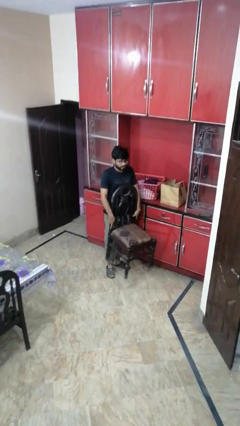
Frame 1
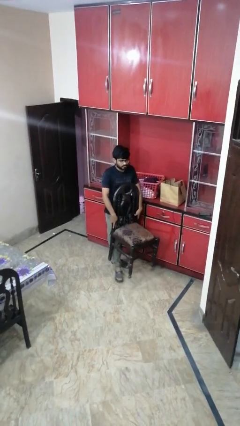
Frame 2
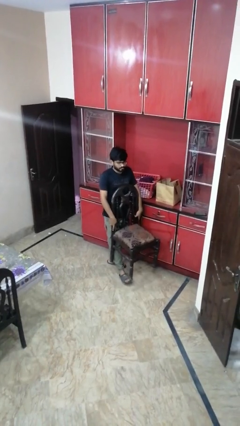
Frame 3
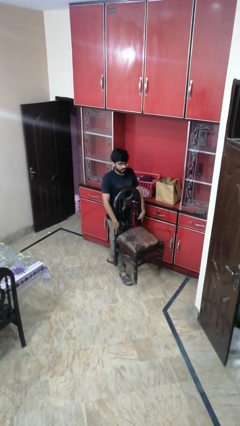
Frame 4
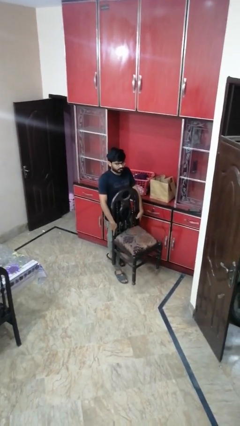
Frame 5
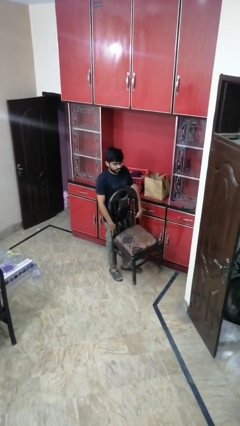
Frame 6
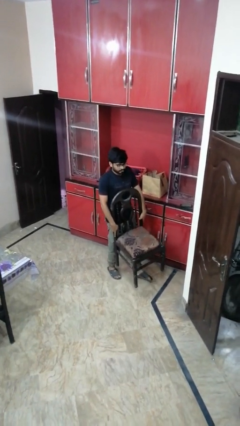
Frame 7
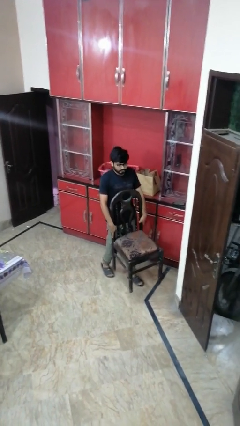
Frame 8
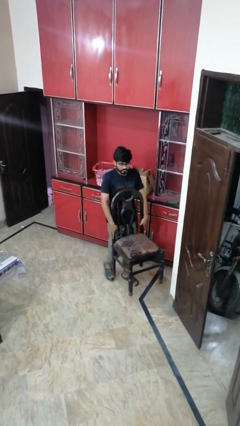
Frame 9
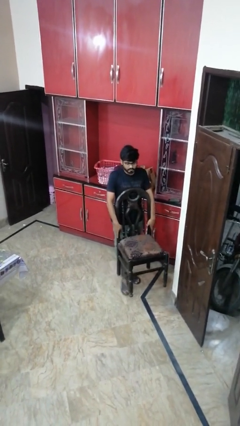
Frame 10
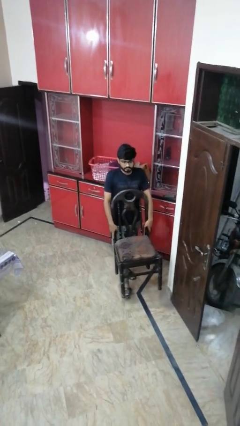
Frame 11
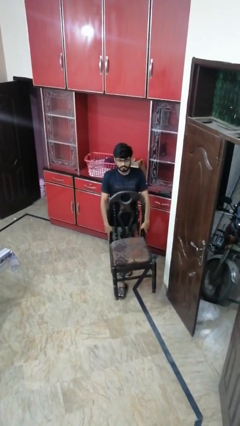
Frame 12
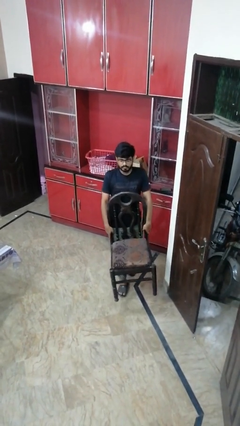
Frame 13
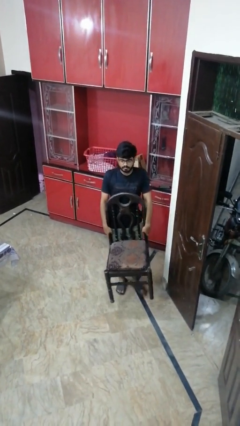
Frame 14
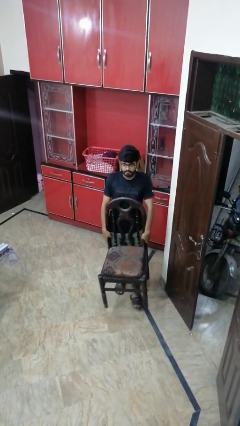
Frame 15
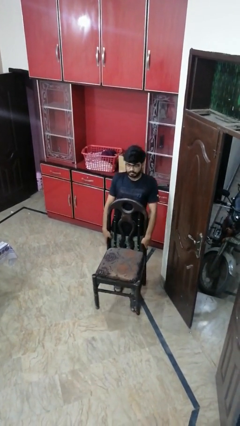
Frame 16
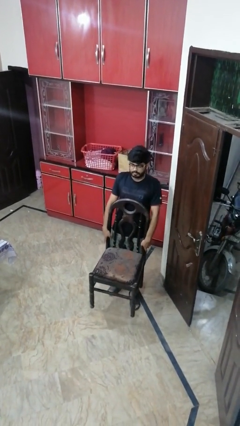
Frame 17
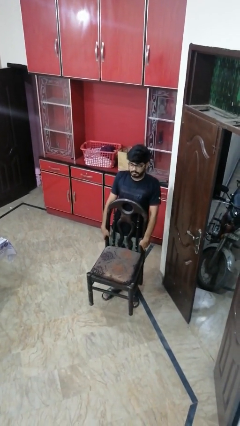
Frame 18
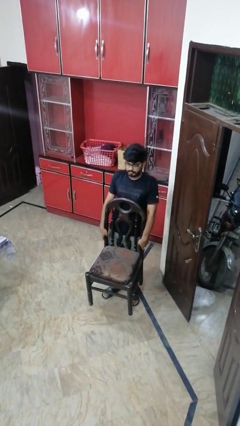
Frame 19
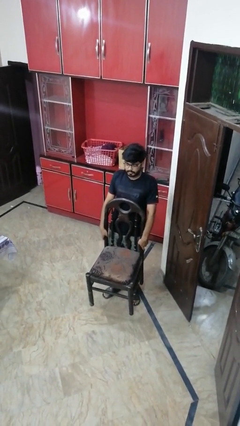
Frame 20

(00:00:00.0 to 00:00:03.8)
person carries furniture

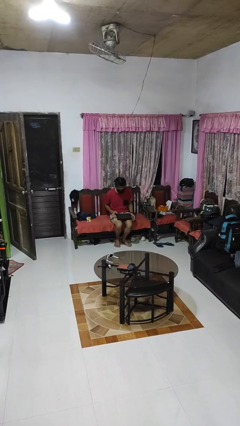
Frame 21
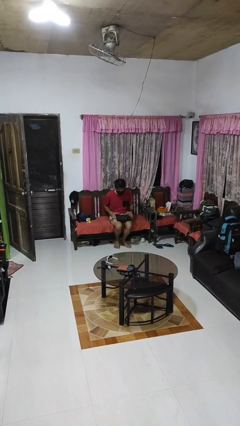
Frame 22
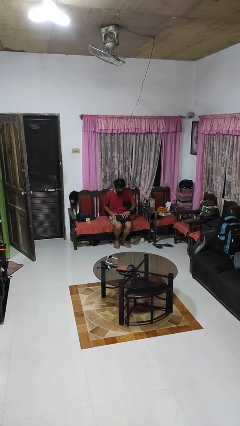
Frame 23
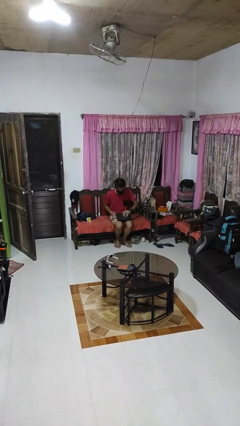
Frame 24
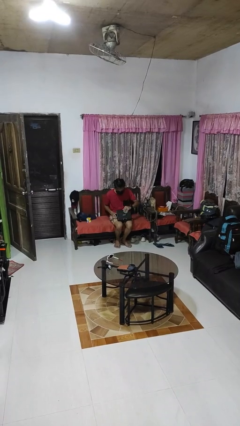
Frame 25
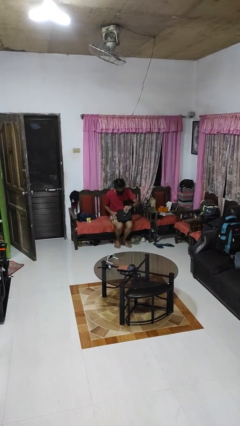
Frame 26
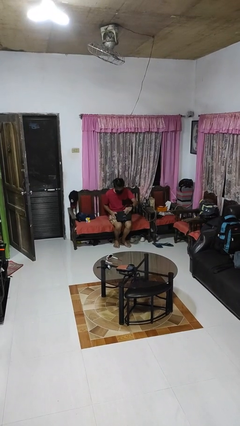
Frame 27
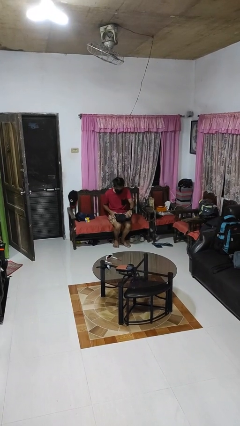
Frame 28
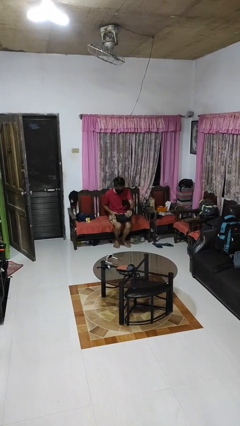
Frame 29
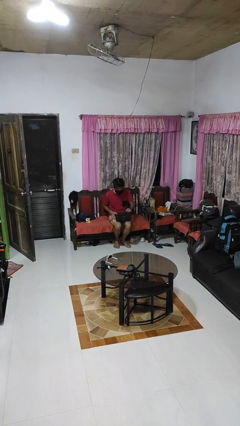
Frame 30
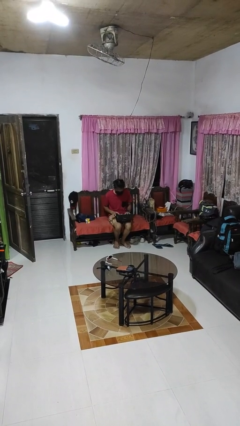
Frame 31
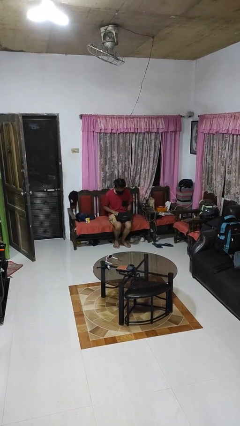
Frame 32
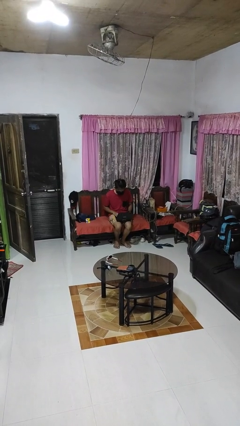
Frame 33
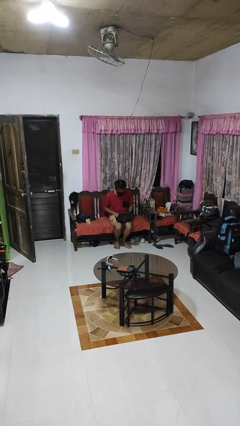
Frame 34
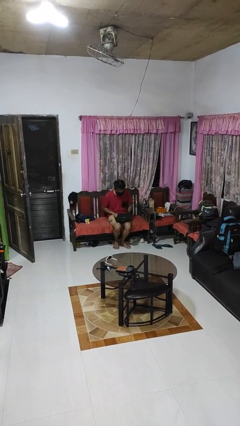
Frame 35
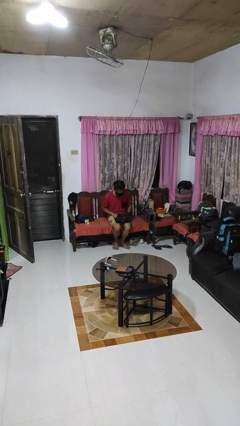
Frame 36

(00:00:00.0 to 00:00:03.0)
person opens laptop

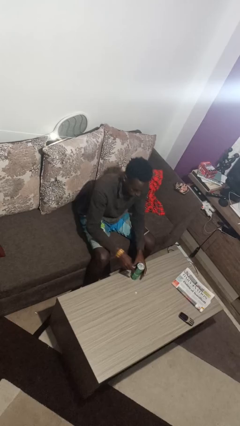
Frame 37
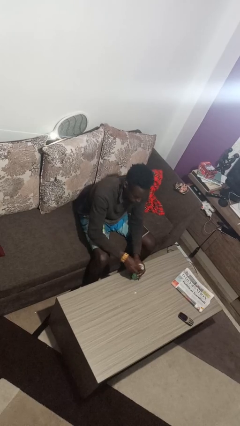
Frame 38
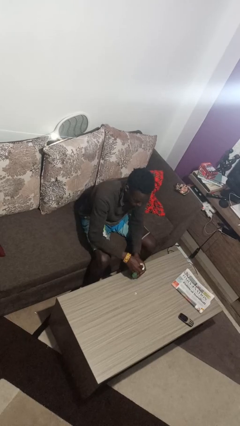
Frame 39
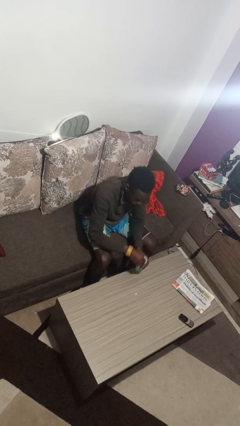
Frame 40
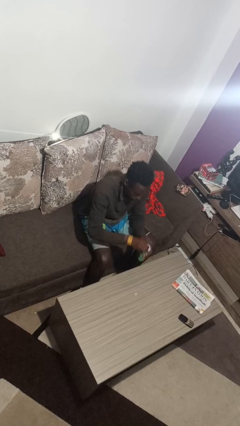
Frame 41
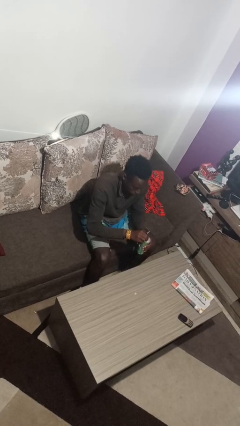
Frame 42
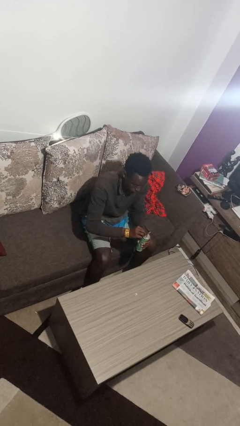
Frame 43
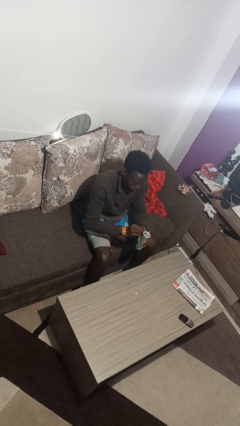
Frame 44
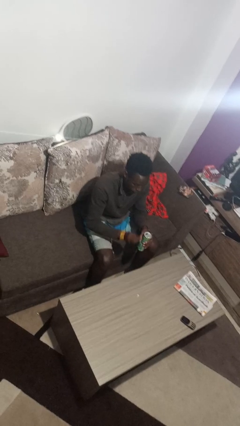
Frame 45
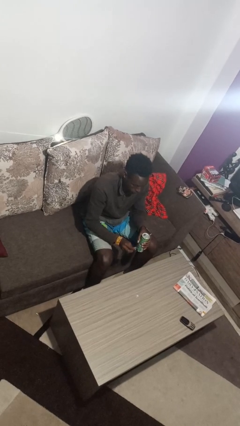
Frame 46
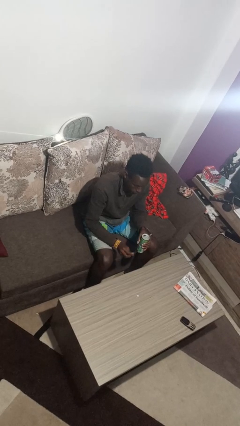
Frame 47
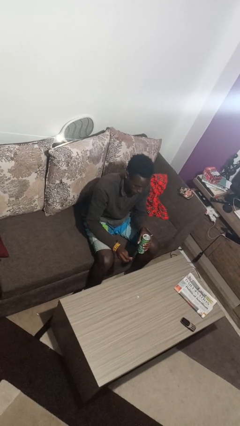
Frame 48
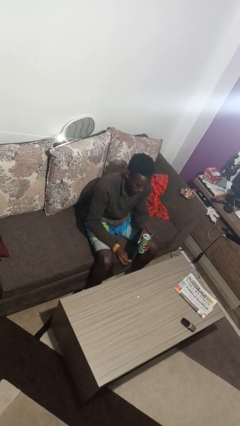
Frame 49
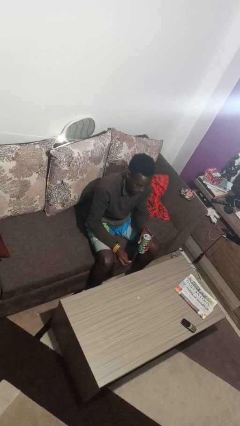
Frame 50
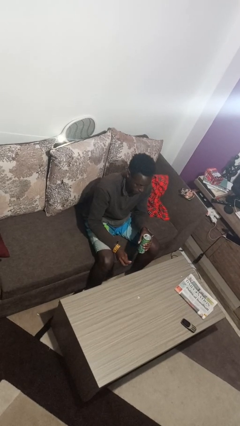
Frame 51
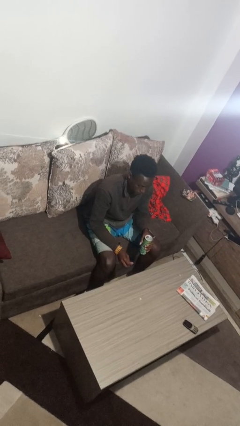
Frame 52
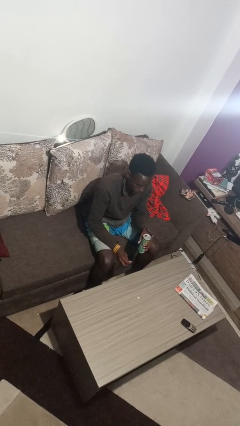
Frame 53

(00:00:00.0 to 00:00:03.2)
person opens beverage can

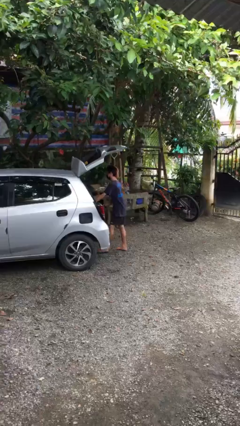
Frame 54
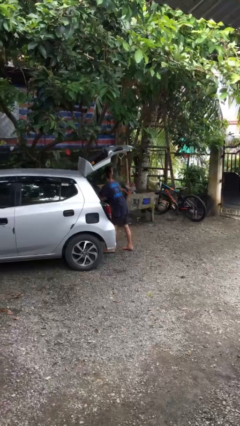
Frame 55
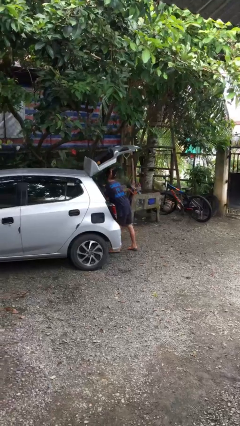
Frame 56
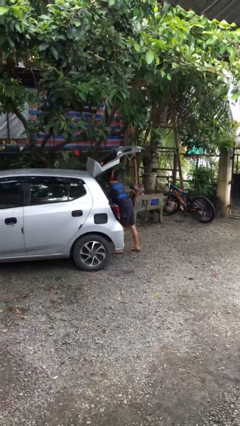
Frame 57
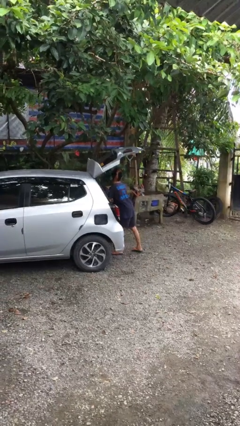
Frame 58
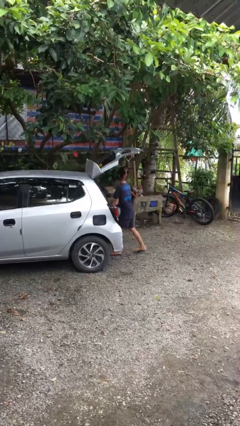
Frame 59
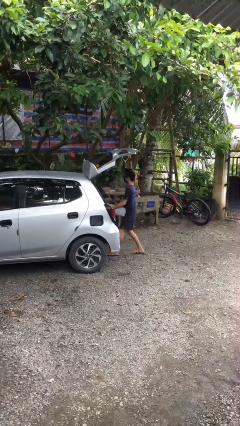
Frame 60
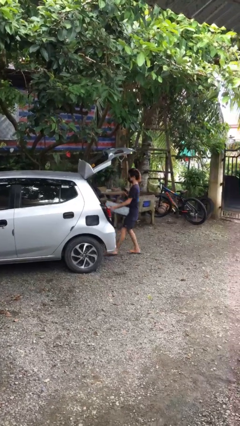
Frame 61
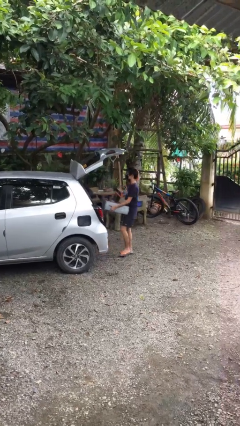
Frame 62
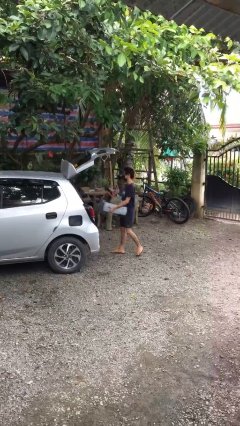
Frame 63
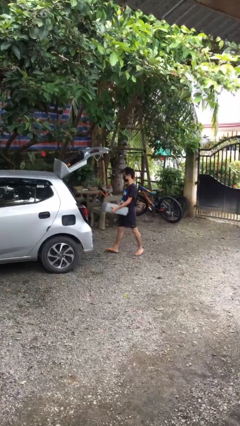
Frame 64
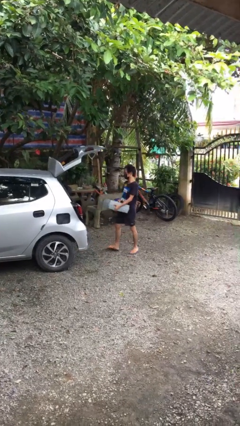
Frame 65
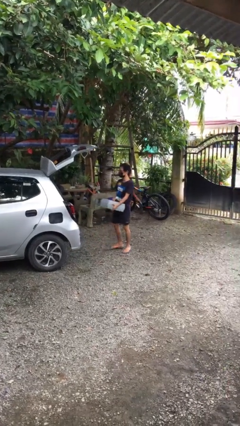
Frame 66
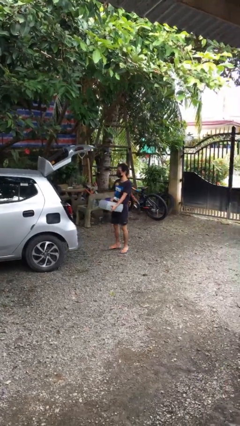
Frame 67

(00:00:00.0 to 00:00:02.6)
person unloads car

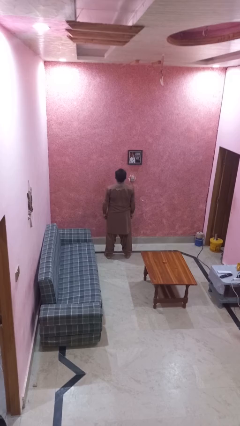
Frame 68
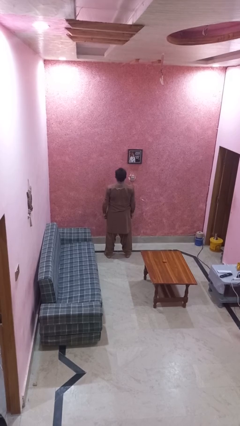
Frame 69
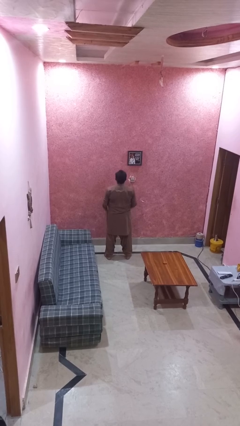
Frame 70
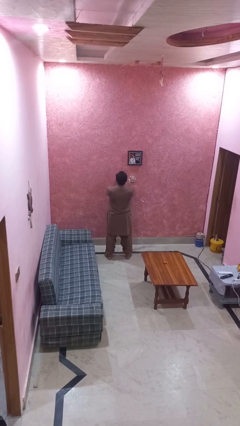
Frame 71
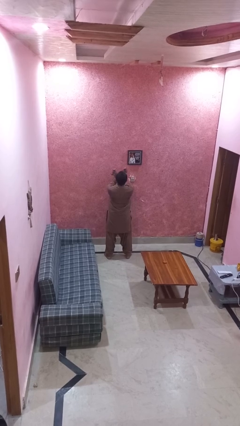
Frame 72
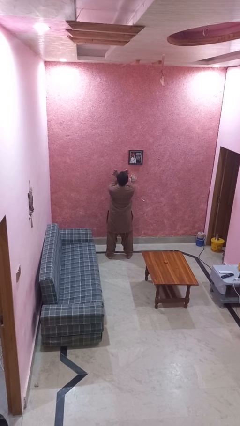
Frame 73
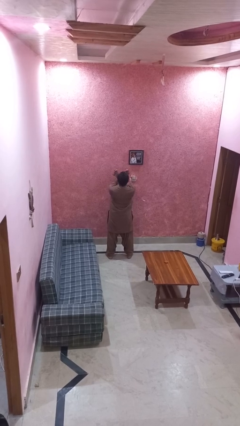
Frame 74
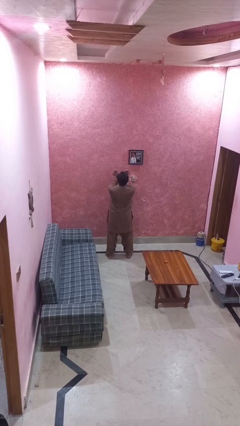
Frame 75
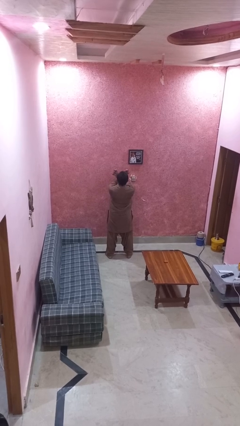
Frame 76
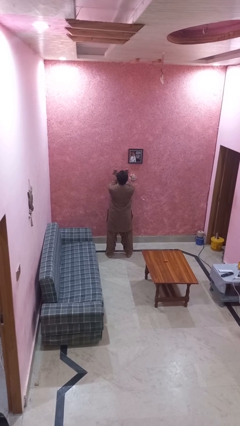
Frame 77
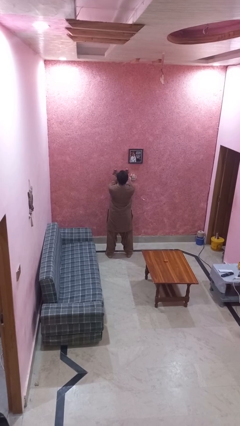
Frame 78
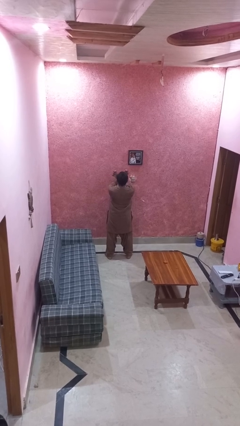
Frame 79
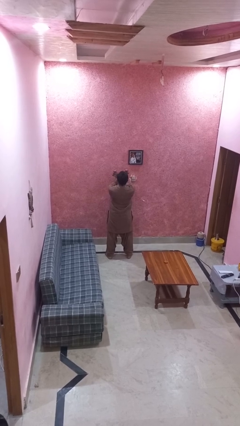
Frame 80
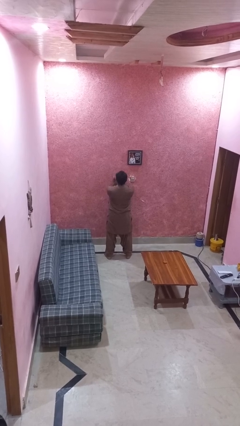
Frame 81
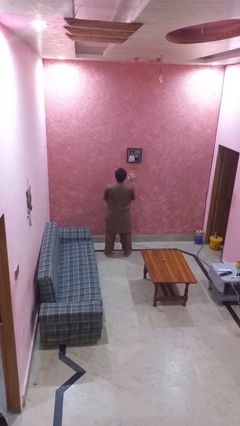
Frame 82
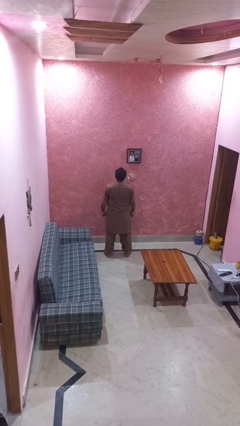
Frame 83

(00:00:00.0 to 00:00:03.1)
person gestures arms x

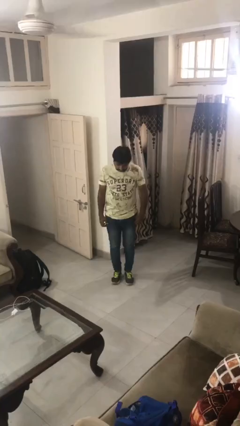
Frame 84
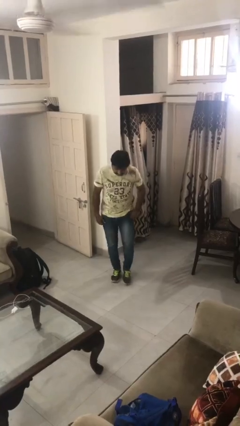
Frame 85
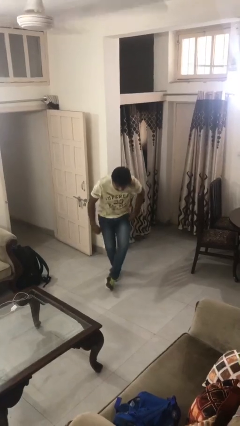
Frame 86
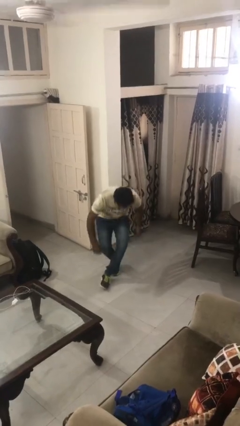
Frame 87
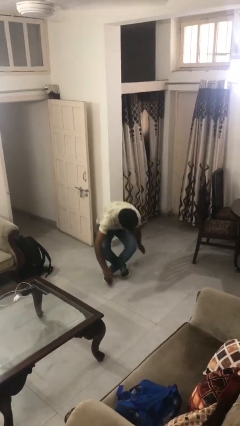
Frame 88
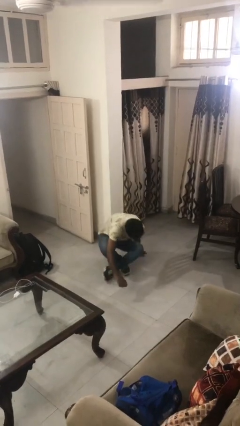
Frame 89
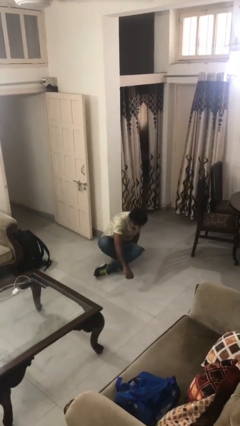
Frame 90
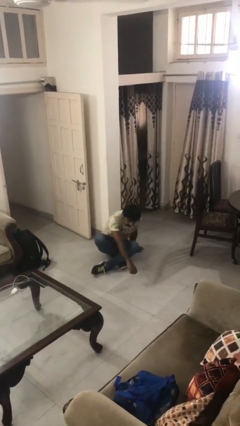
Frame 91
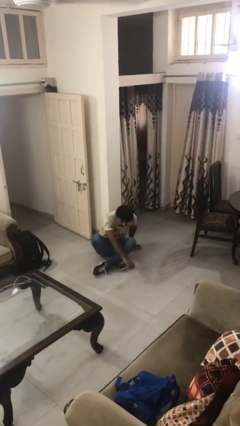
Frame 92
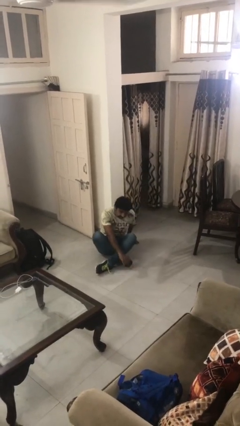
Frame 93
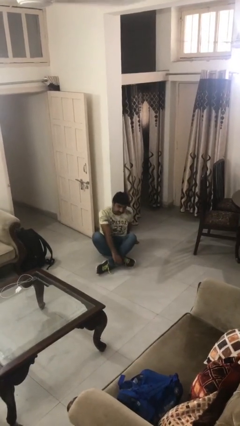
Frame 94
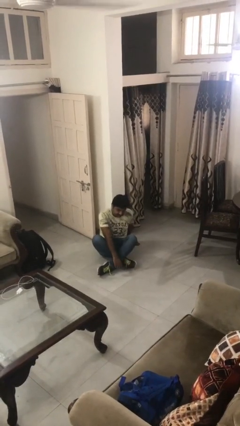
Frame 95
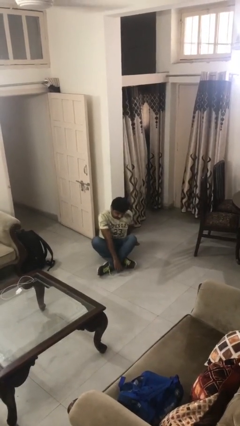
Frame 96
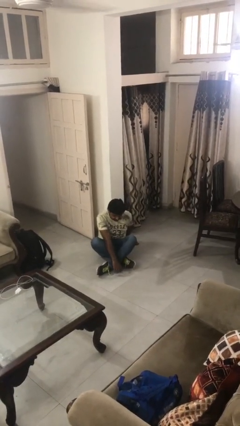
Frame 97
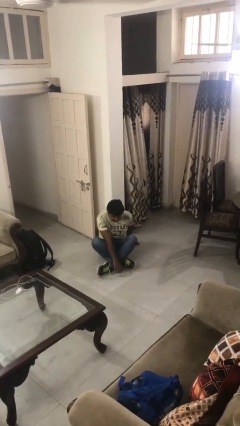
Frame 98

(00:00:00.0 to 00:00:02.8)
person sits crisscross
